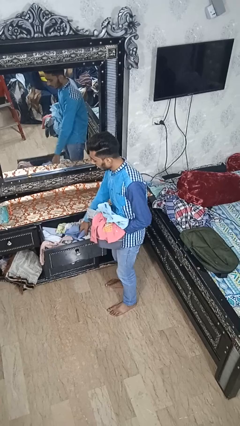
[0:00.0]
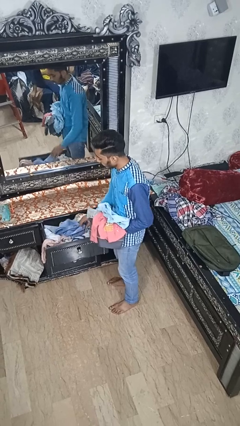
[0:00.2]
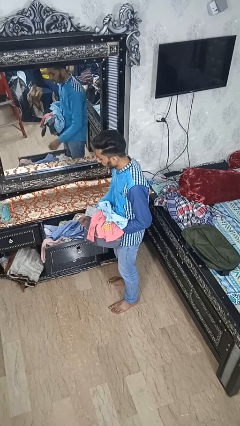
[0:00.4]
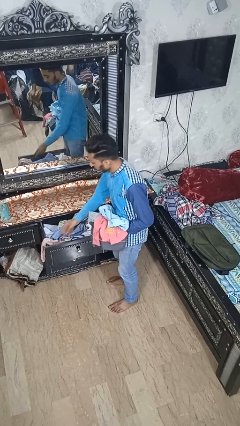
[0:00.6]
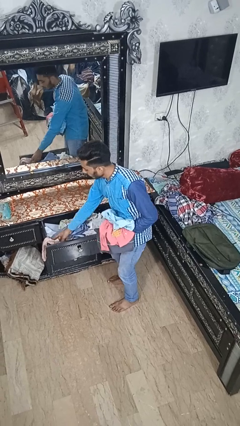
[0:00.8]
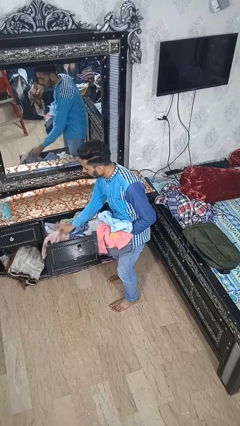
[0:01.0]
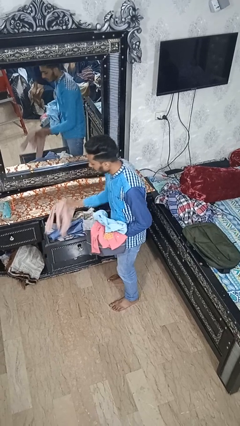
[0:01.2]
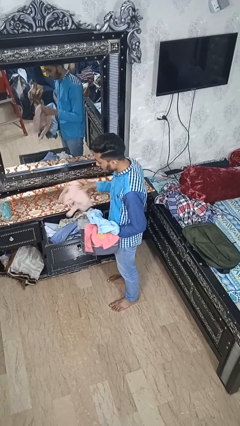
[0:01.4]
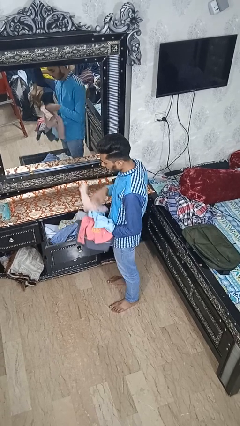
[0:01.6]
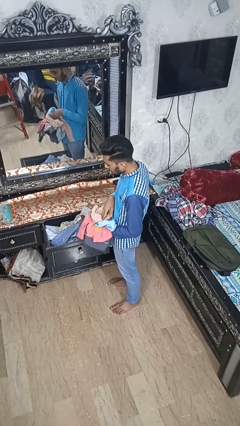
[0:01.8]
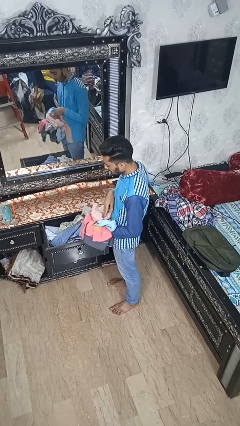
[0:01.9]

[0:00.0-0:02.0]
person takes clothes from dresser

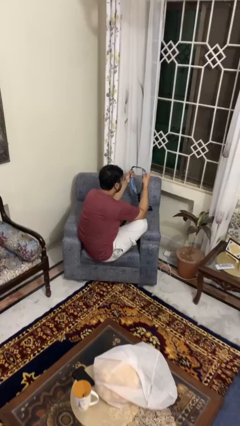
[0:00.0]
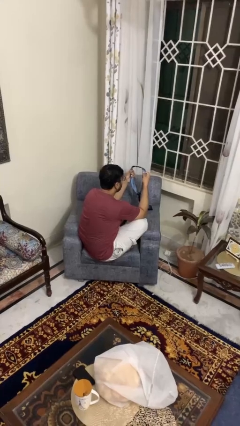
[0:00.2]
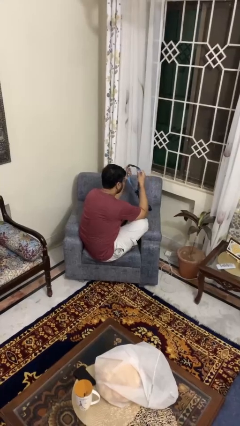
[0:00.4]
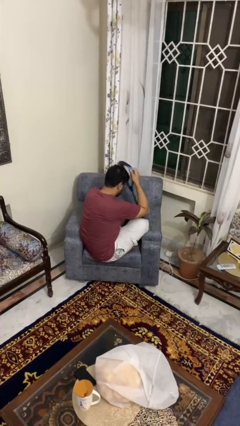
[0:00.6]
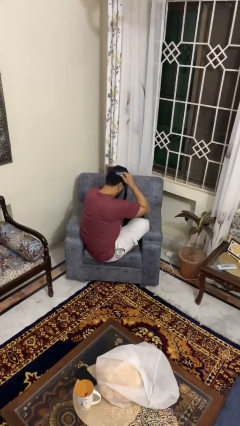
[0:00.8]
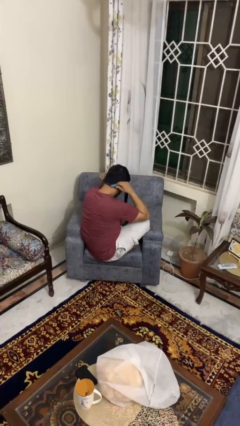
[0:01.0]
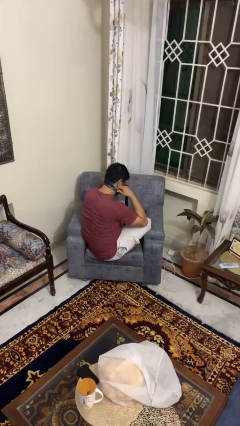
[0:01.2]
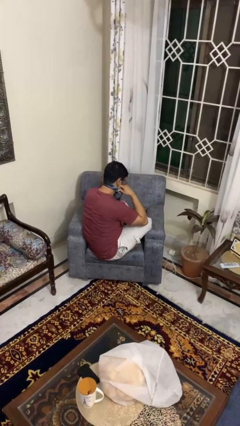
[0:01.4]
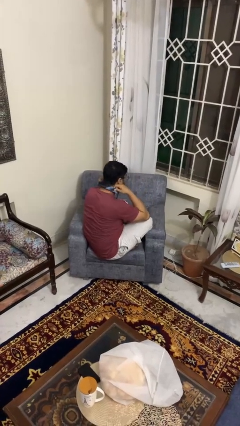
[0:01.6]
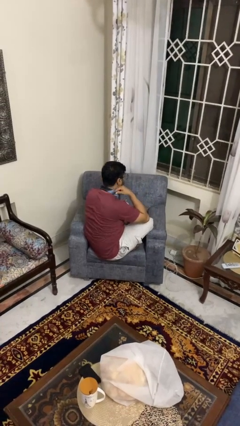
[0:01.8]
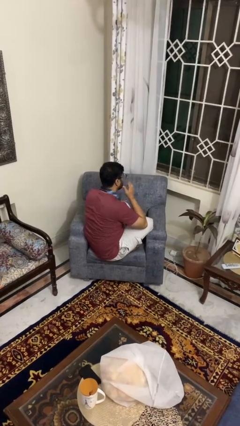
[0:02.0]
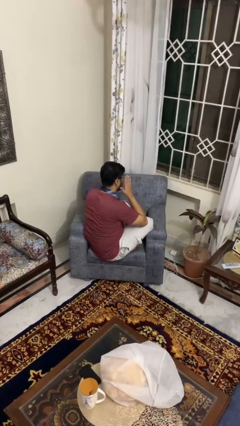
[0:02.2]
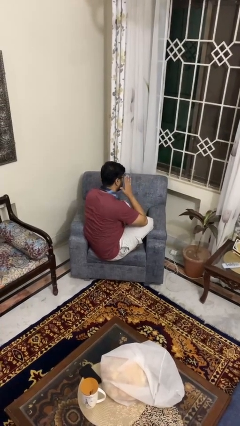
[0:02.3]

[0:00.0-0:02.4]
person puts on necktie

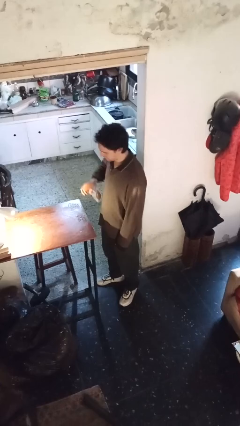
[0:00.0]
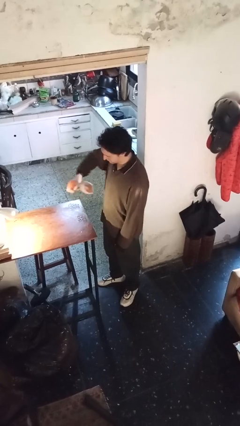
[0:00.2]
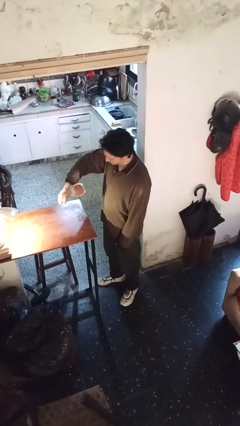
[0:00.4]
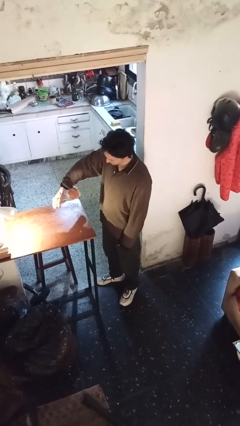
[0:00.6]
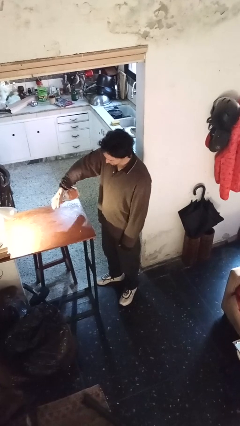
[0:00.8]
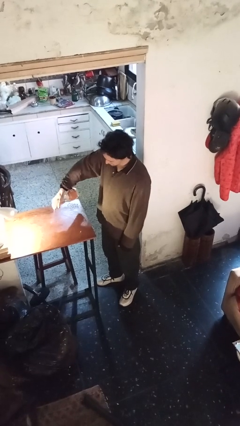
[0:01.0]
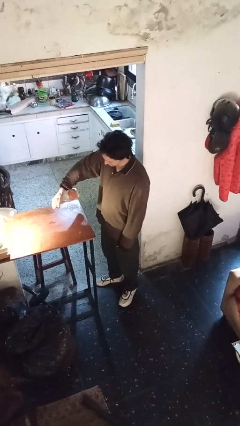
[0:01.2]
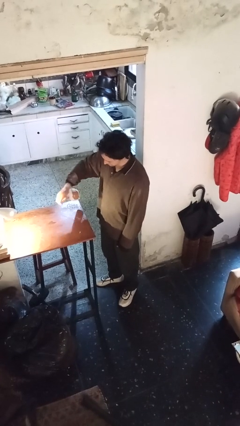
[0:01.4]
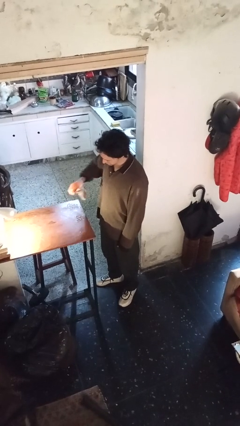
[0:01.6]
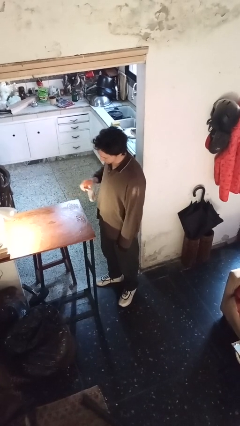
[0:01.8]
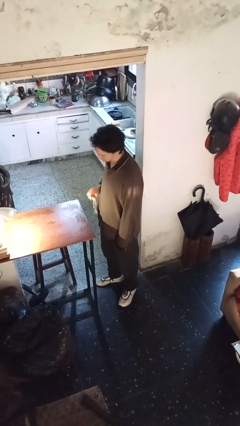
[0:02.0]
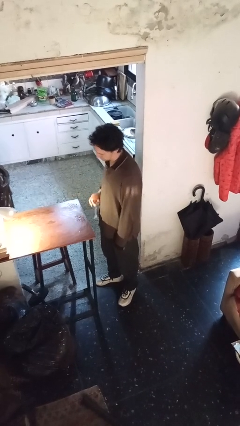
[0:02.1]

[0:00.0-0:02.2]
person sprays from bottle

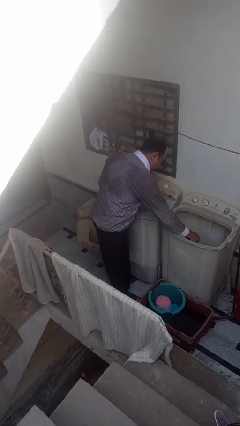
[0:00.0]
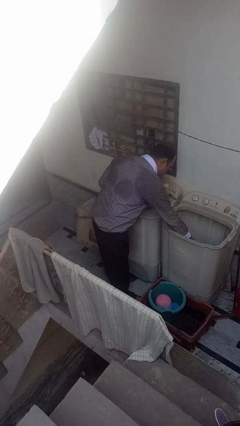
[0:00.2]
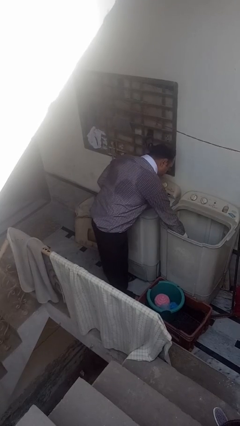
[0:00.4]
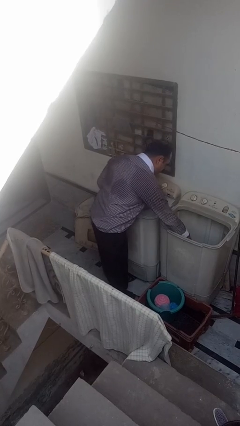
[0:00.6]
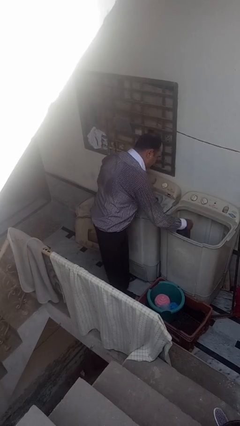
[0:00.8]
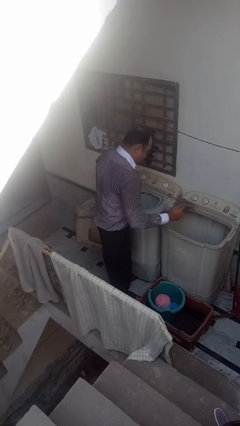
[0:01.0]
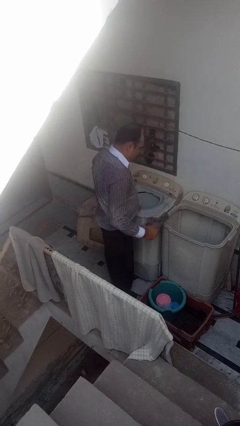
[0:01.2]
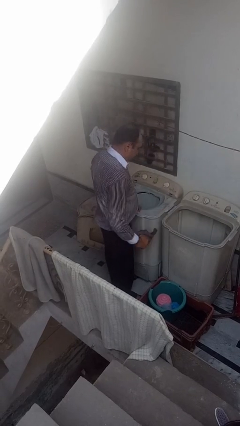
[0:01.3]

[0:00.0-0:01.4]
person unloads clotheswasher

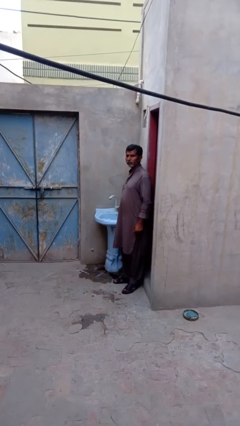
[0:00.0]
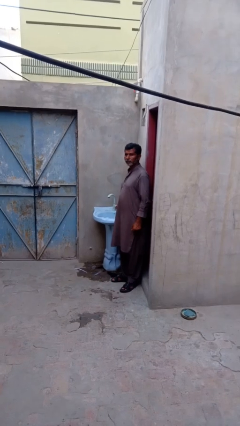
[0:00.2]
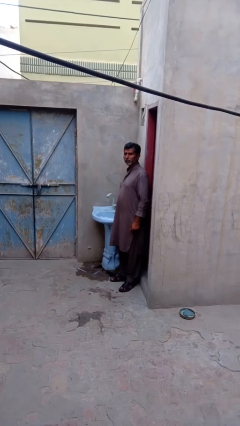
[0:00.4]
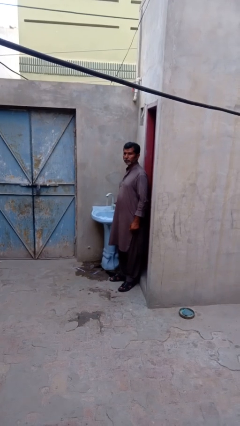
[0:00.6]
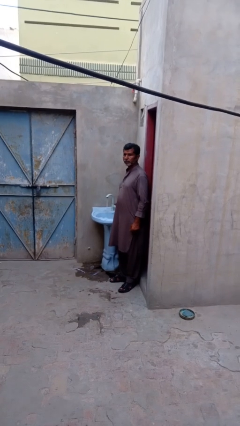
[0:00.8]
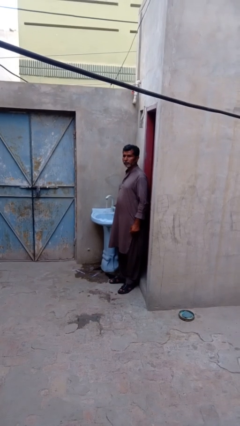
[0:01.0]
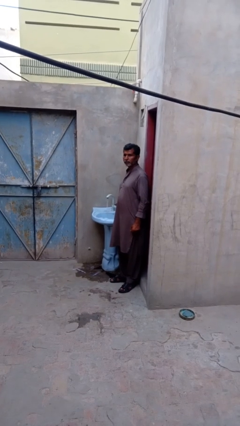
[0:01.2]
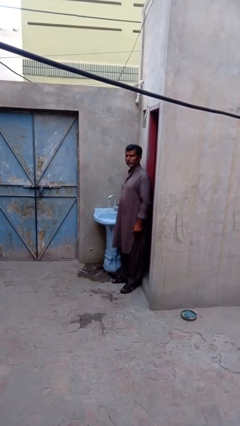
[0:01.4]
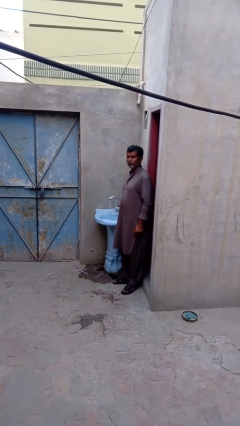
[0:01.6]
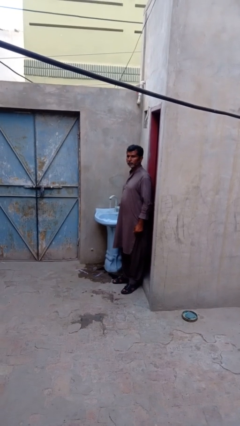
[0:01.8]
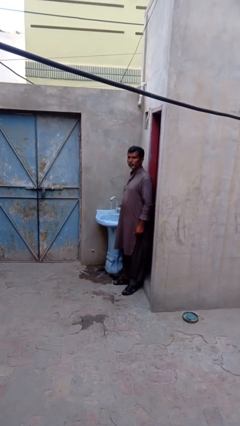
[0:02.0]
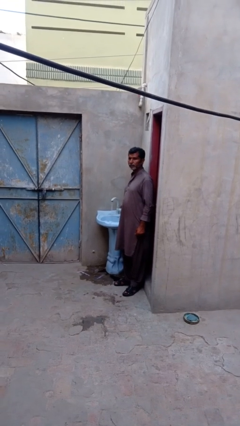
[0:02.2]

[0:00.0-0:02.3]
person turns on faucet
